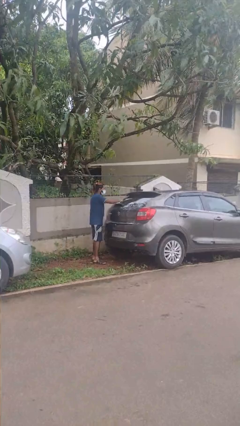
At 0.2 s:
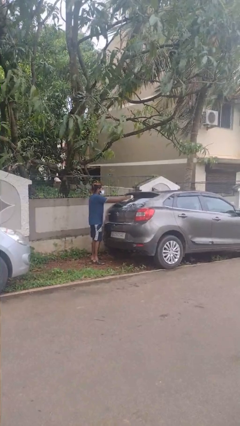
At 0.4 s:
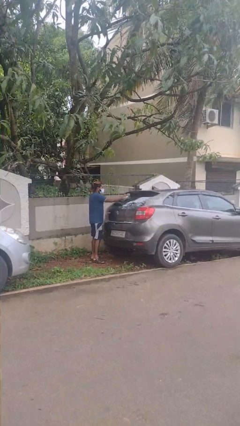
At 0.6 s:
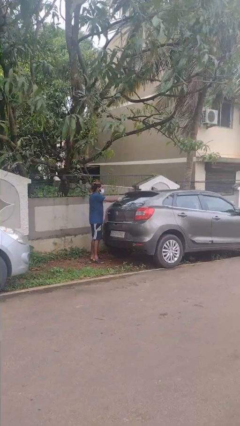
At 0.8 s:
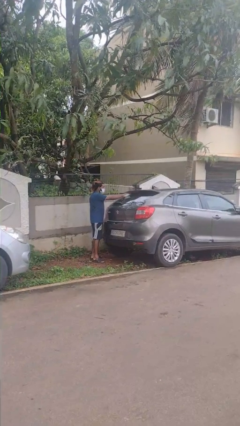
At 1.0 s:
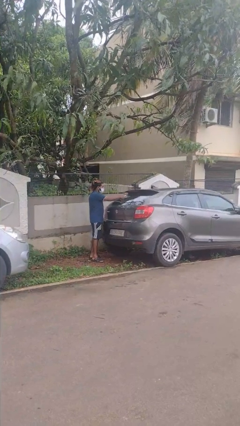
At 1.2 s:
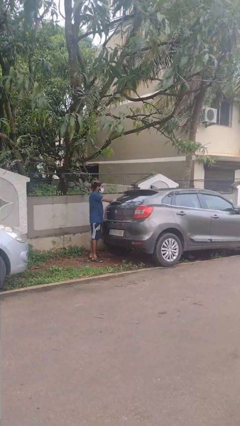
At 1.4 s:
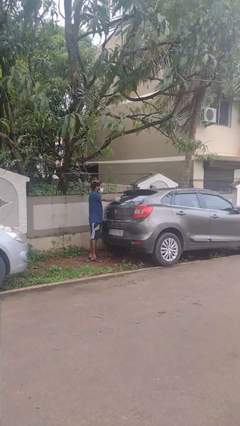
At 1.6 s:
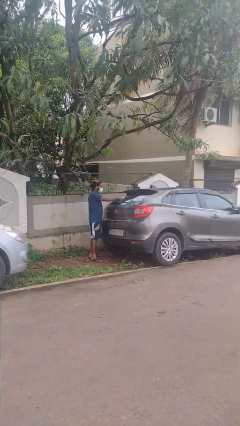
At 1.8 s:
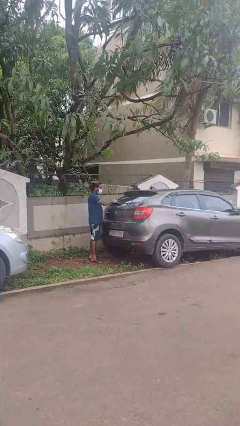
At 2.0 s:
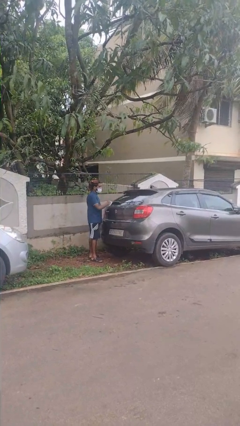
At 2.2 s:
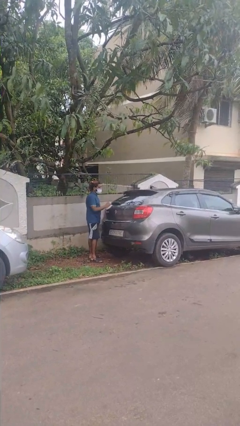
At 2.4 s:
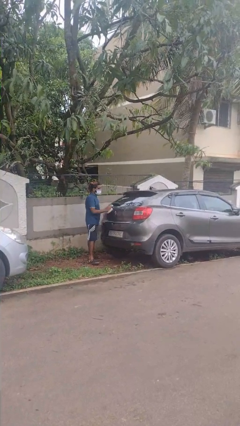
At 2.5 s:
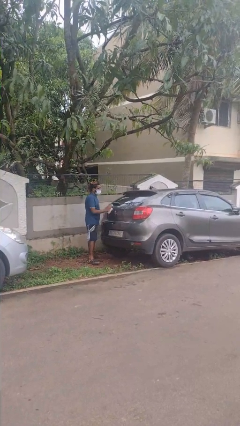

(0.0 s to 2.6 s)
person polishes car with rag

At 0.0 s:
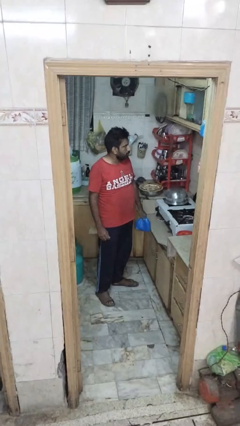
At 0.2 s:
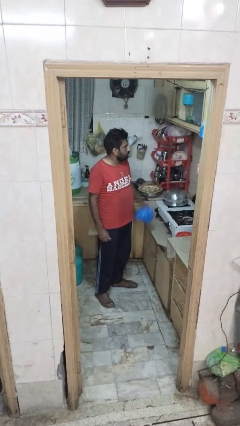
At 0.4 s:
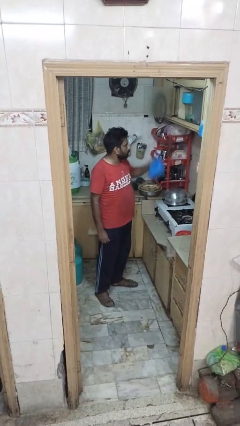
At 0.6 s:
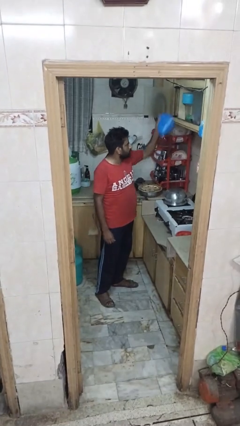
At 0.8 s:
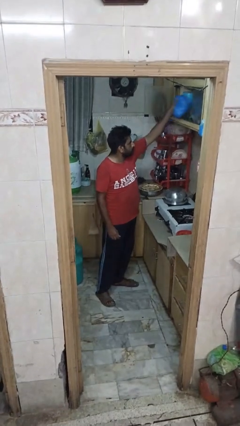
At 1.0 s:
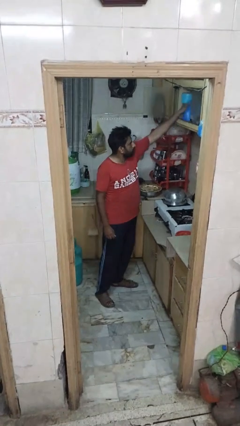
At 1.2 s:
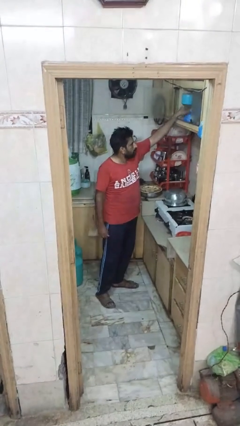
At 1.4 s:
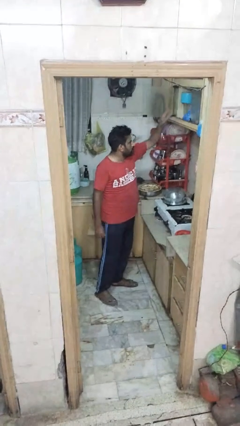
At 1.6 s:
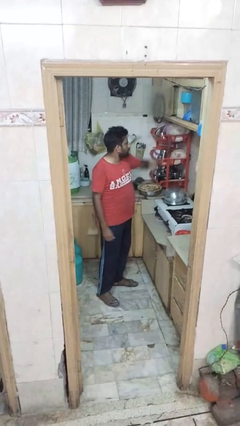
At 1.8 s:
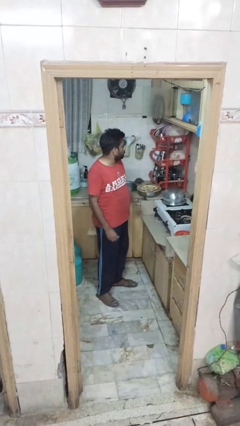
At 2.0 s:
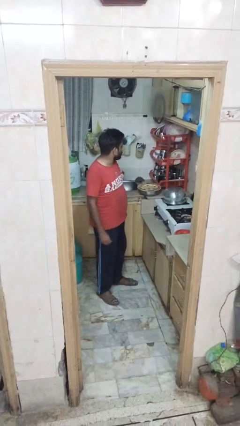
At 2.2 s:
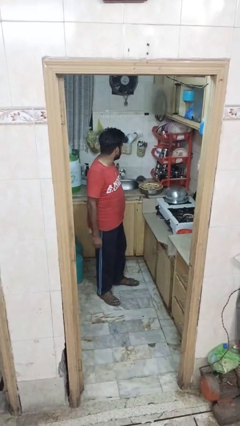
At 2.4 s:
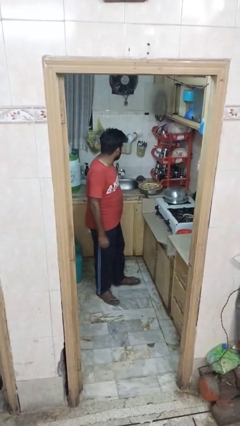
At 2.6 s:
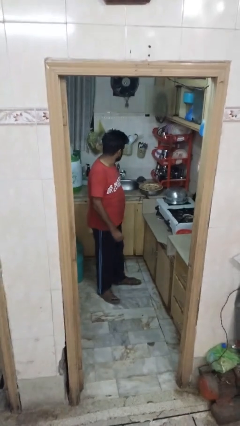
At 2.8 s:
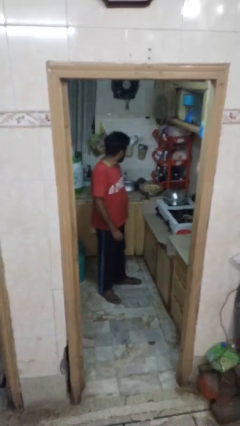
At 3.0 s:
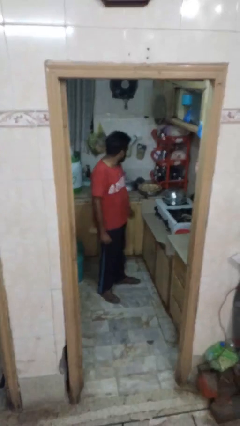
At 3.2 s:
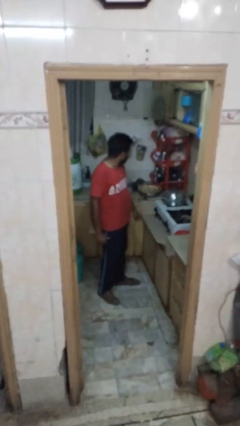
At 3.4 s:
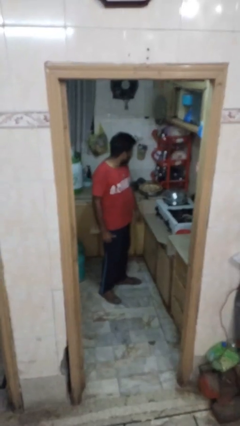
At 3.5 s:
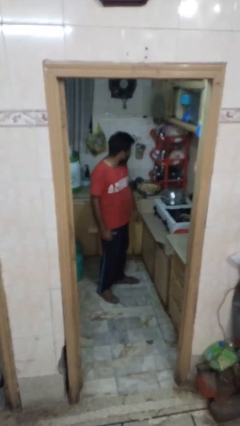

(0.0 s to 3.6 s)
person loads groceries into cabinet

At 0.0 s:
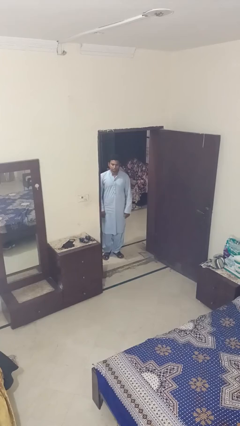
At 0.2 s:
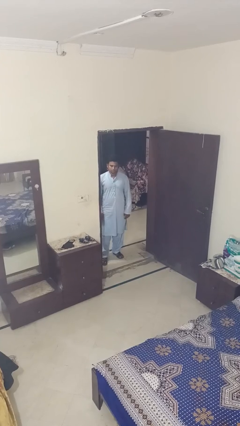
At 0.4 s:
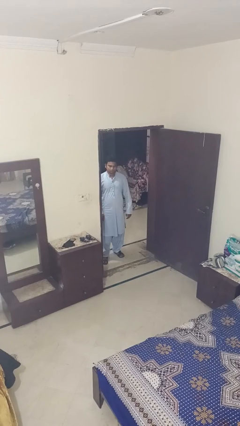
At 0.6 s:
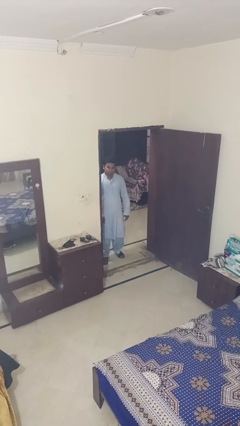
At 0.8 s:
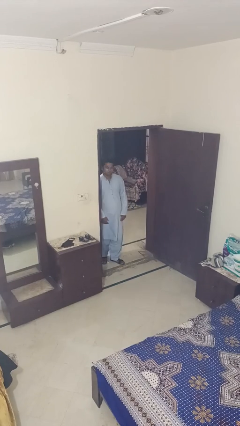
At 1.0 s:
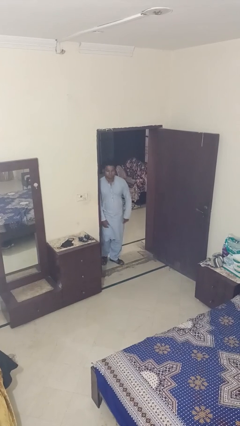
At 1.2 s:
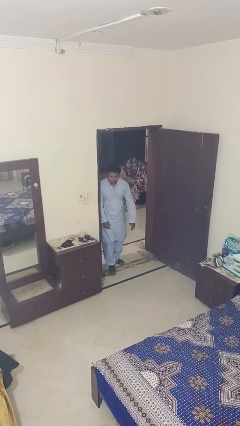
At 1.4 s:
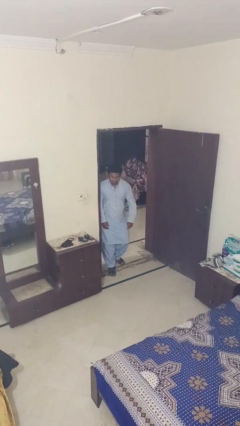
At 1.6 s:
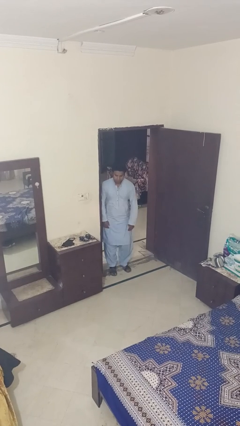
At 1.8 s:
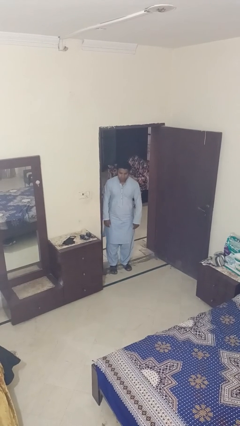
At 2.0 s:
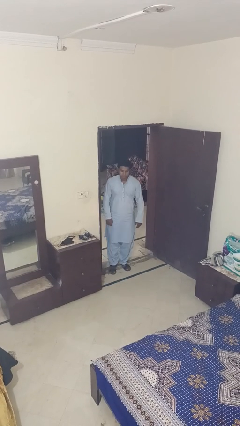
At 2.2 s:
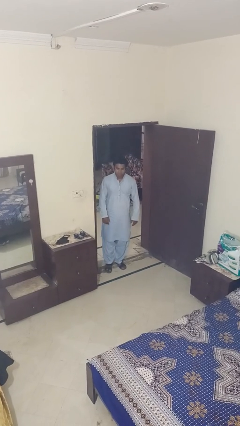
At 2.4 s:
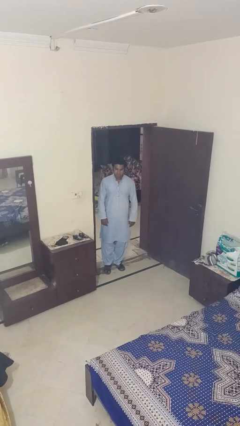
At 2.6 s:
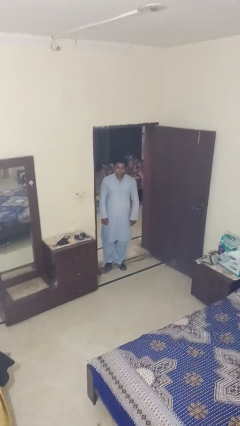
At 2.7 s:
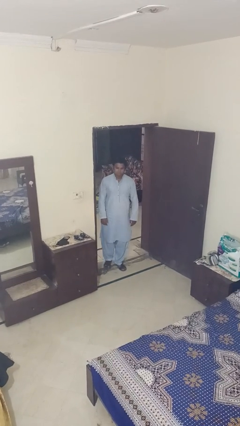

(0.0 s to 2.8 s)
person bumps into wall

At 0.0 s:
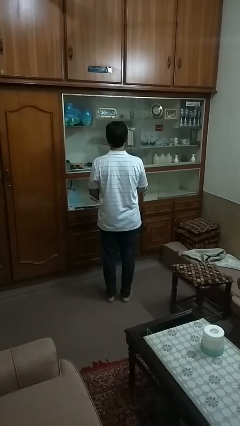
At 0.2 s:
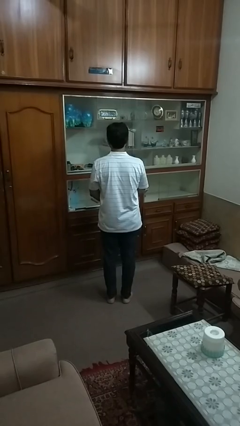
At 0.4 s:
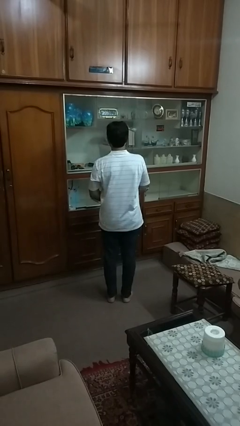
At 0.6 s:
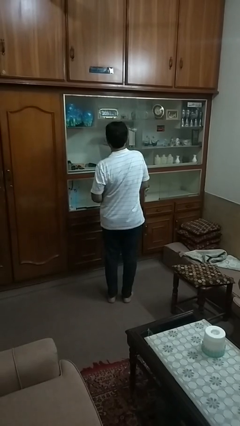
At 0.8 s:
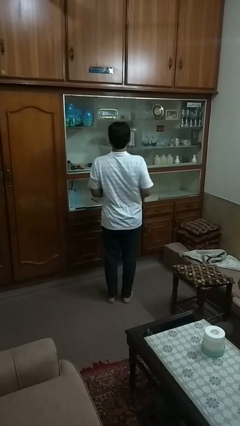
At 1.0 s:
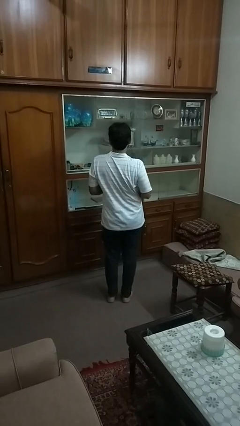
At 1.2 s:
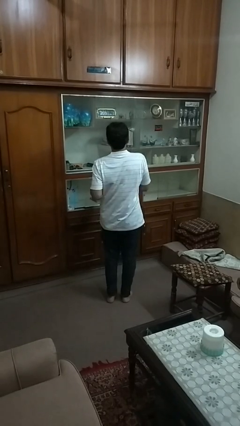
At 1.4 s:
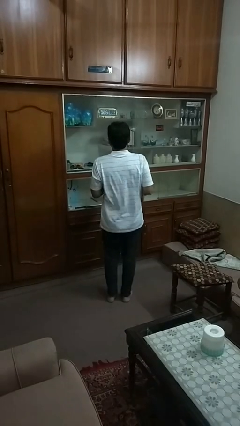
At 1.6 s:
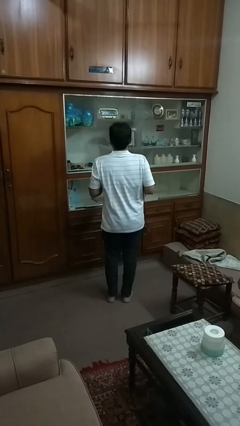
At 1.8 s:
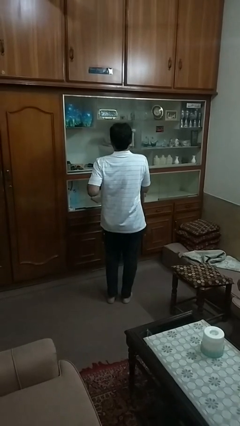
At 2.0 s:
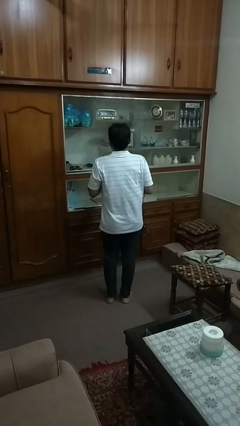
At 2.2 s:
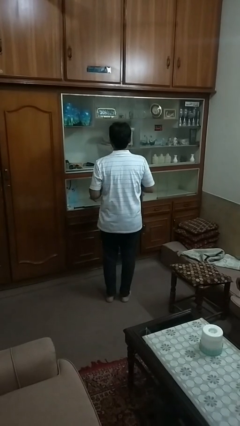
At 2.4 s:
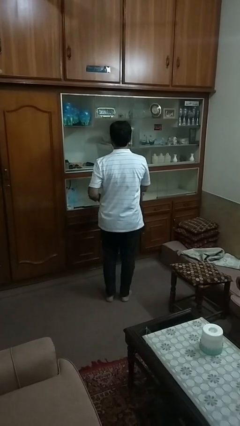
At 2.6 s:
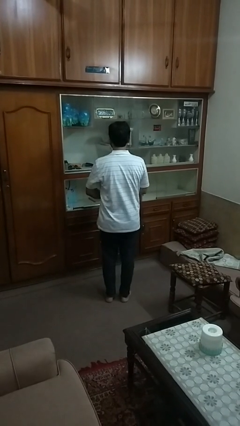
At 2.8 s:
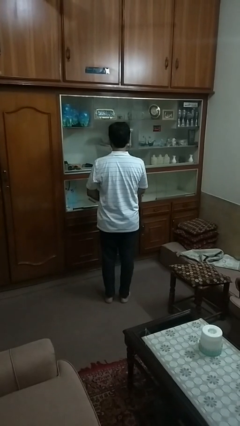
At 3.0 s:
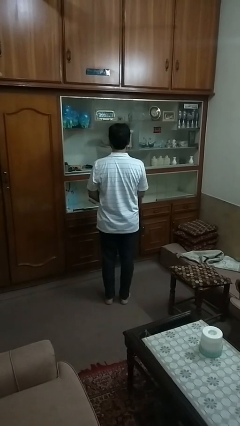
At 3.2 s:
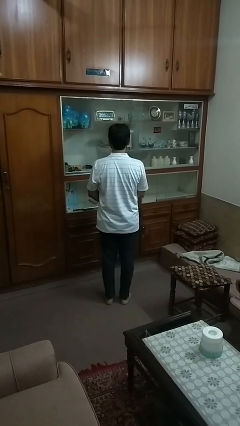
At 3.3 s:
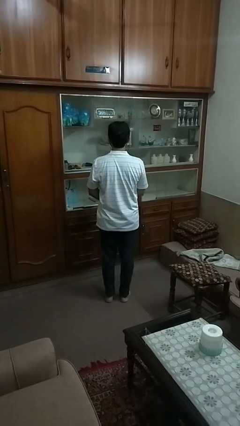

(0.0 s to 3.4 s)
person dances in place

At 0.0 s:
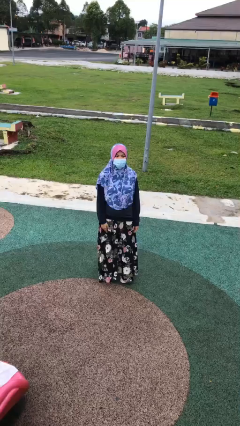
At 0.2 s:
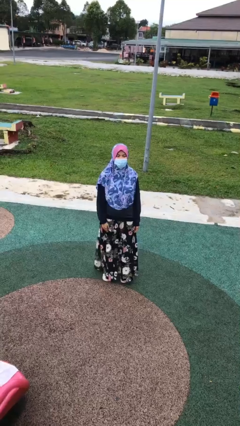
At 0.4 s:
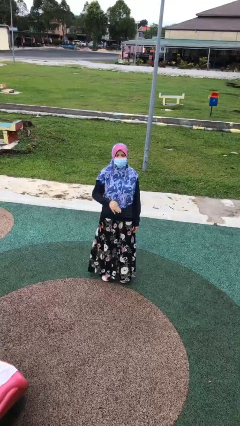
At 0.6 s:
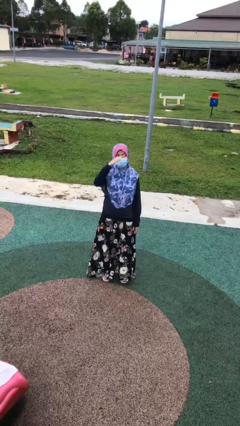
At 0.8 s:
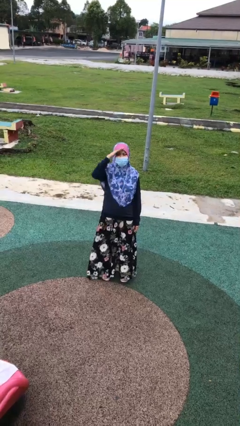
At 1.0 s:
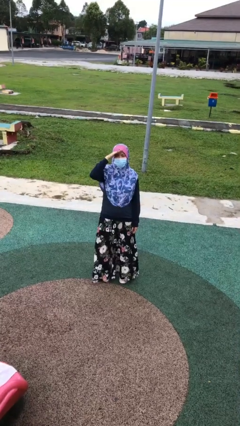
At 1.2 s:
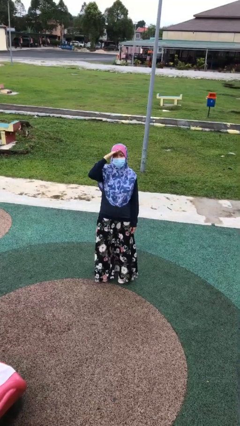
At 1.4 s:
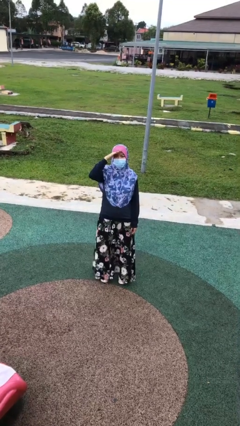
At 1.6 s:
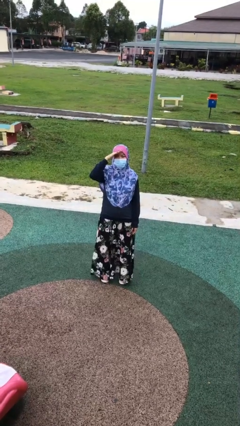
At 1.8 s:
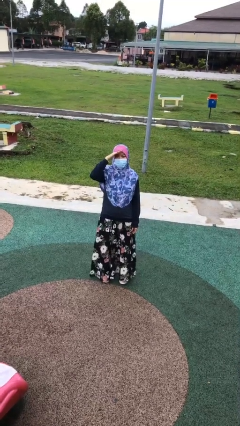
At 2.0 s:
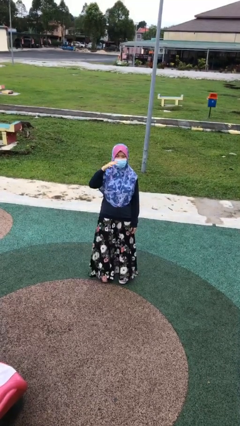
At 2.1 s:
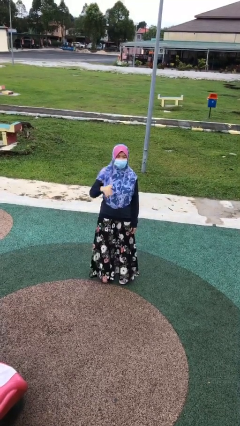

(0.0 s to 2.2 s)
person salutes

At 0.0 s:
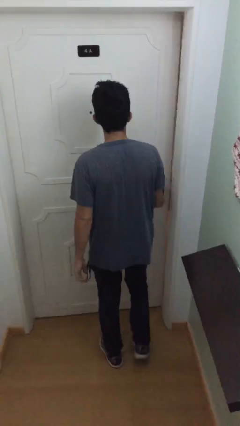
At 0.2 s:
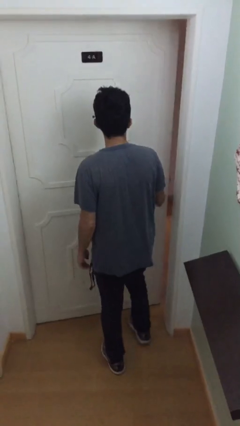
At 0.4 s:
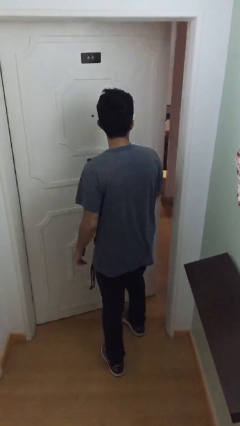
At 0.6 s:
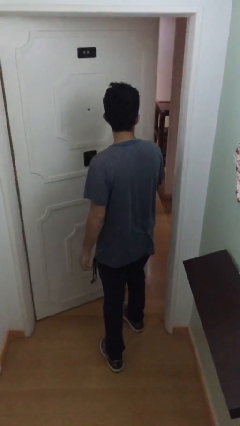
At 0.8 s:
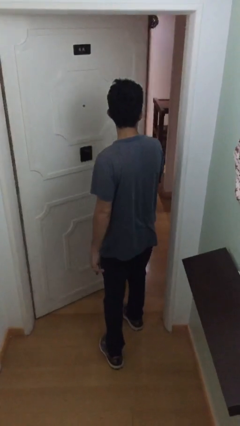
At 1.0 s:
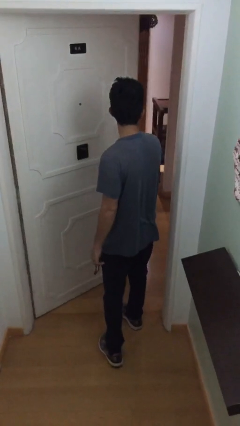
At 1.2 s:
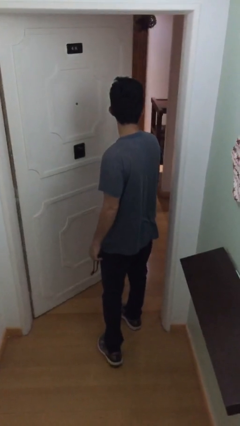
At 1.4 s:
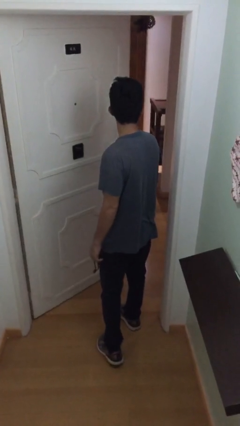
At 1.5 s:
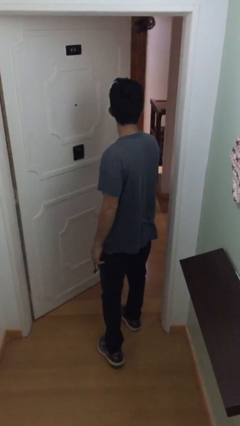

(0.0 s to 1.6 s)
person opens facility door

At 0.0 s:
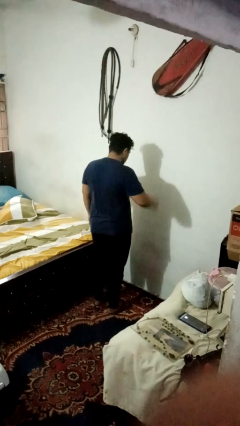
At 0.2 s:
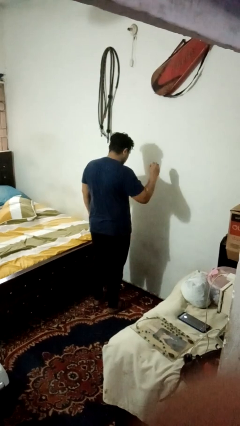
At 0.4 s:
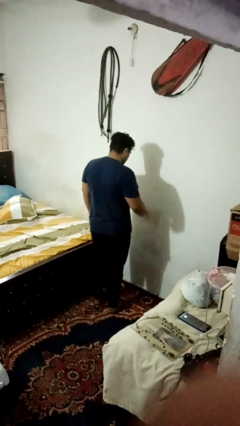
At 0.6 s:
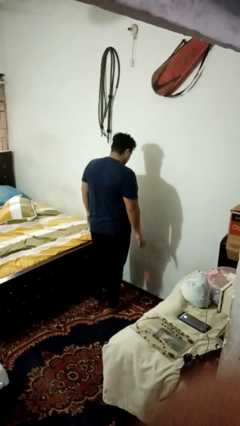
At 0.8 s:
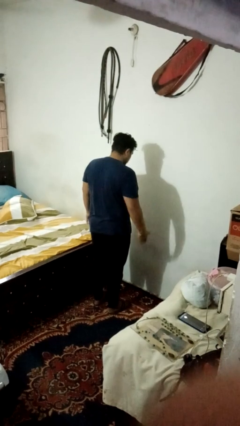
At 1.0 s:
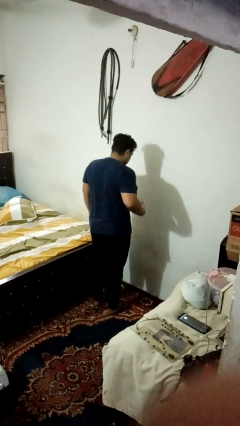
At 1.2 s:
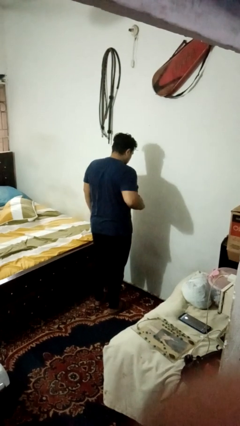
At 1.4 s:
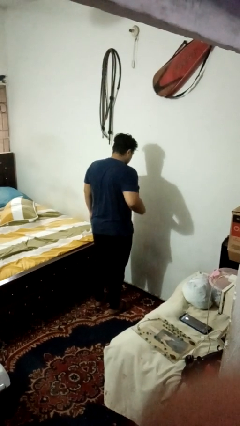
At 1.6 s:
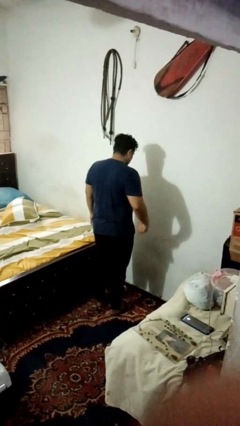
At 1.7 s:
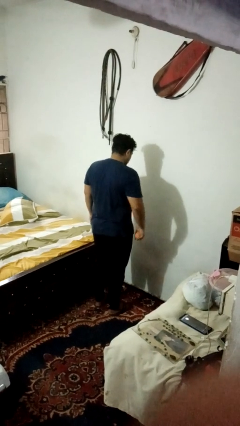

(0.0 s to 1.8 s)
person bounces ball on floor
